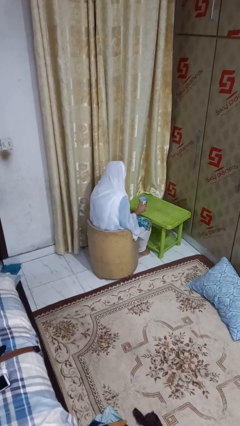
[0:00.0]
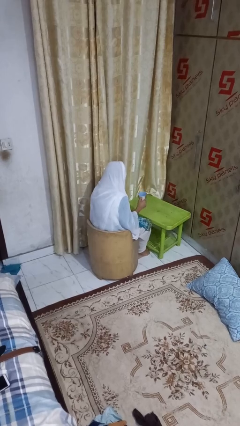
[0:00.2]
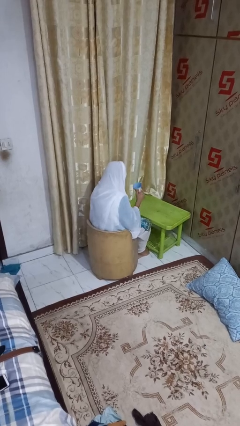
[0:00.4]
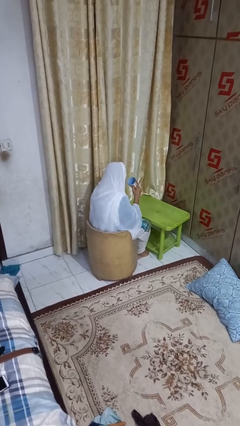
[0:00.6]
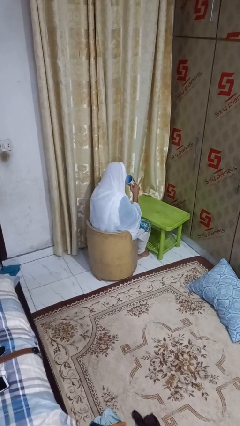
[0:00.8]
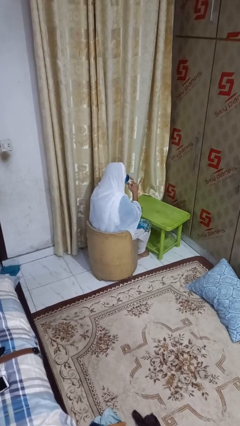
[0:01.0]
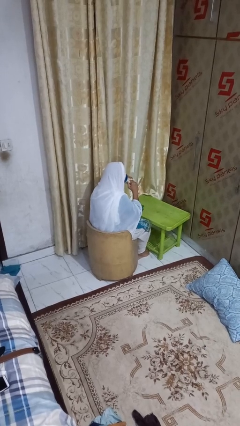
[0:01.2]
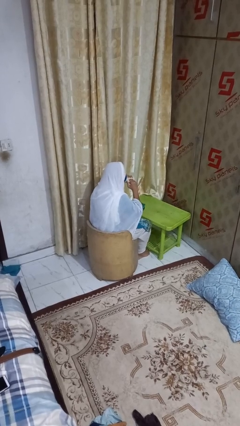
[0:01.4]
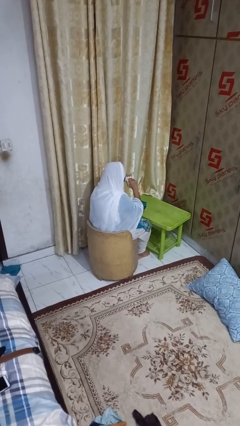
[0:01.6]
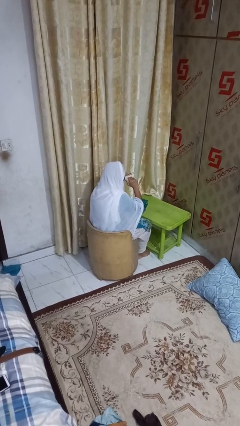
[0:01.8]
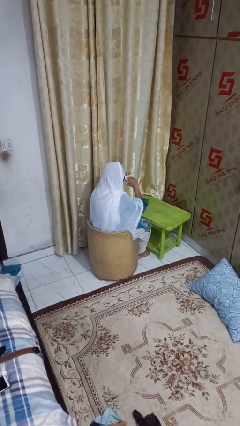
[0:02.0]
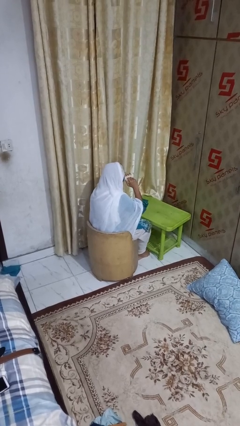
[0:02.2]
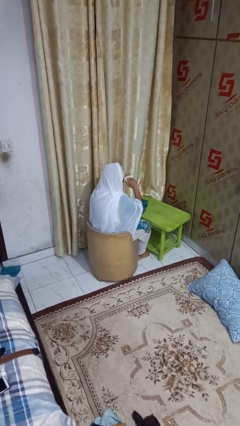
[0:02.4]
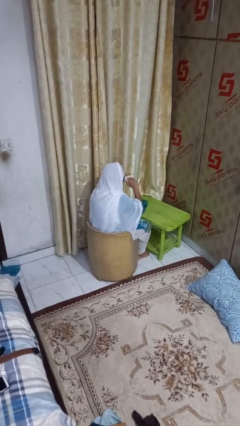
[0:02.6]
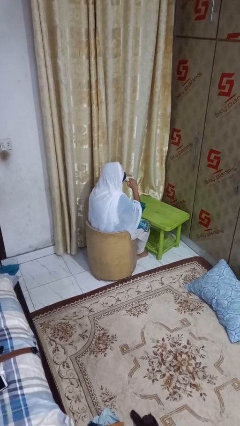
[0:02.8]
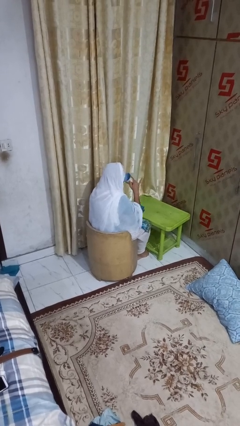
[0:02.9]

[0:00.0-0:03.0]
person drinks from mug

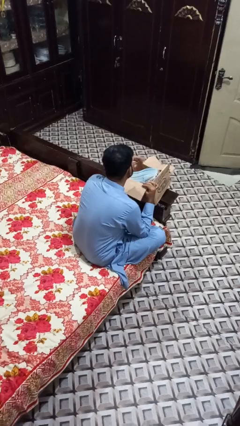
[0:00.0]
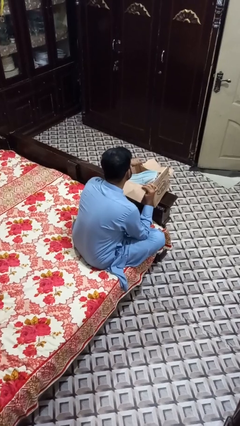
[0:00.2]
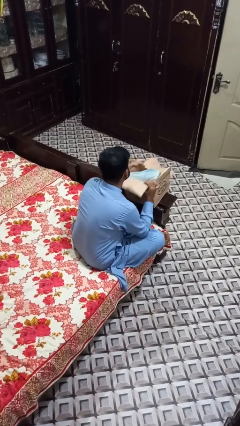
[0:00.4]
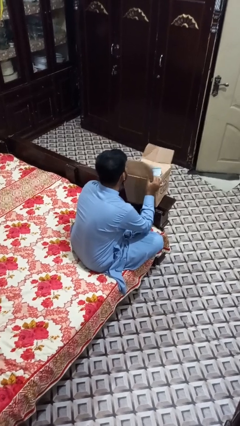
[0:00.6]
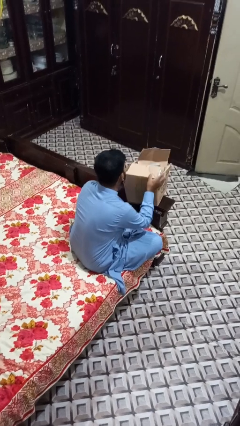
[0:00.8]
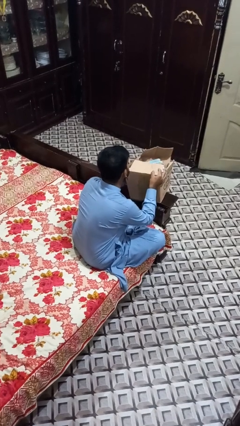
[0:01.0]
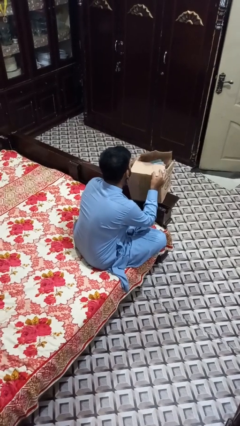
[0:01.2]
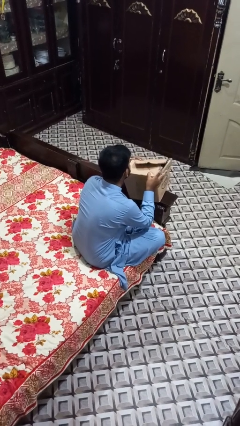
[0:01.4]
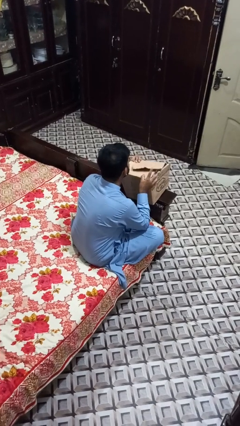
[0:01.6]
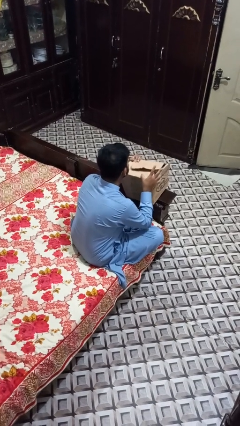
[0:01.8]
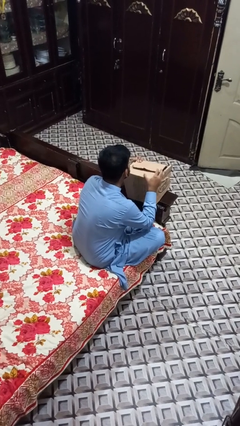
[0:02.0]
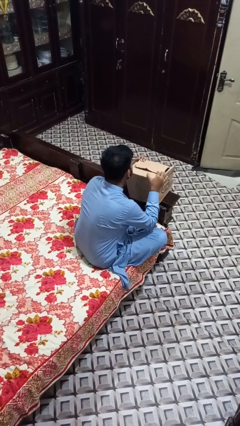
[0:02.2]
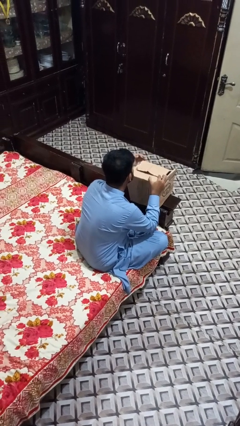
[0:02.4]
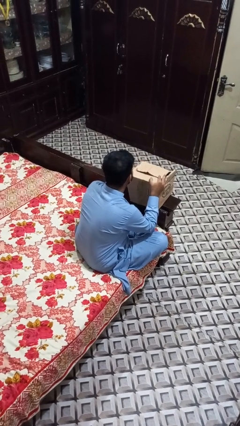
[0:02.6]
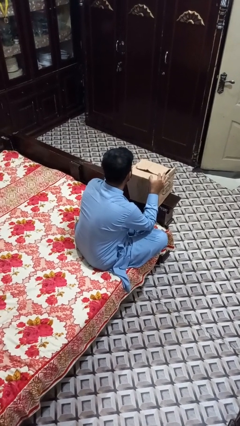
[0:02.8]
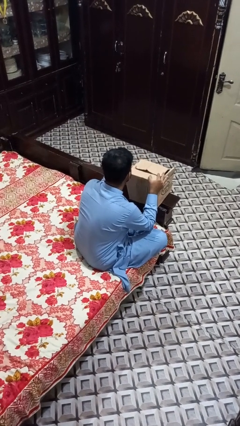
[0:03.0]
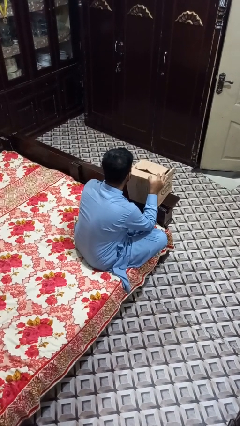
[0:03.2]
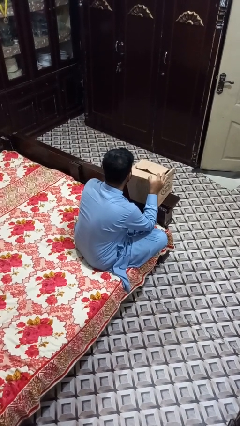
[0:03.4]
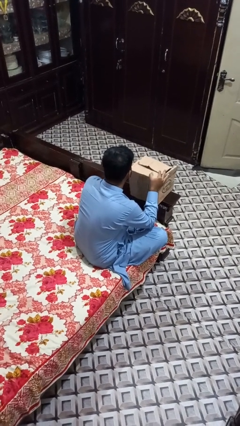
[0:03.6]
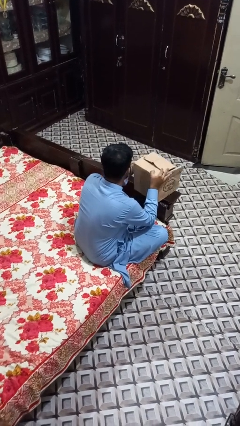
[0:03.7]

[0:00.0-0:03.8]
person closes box

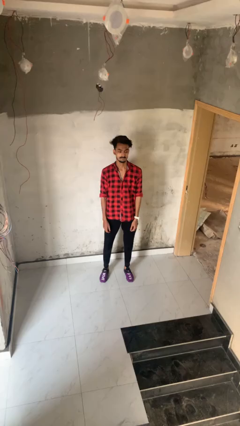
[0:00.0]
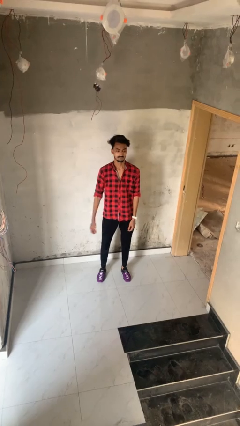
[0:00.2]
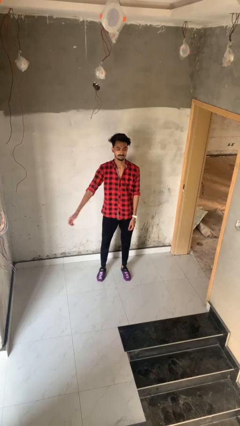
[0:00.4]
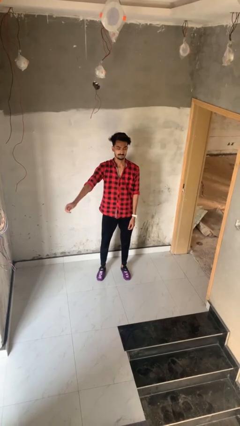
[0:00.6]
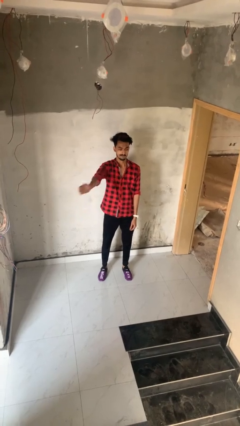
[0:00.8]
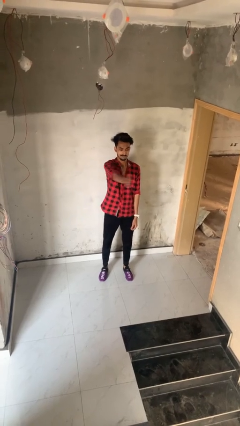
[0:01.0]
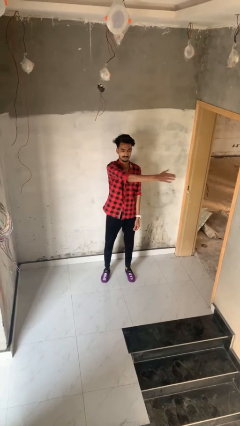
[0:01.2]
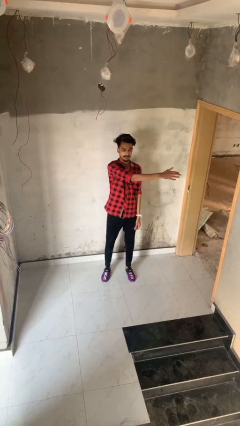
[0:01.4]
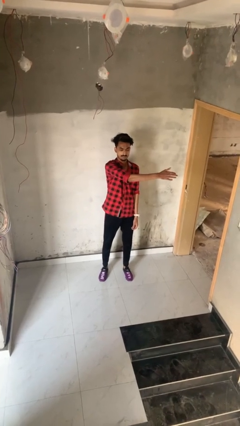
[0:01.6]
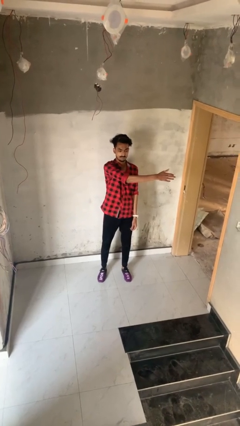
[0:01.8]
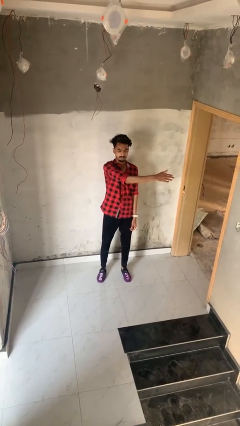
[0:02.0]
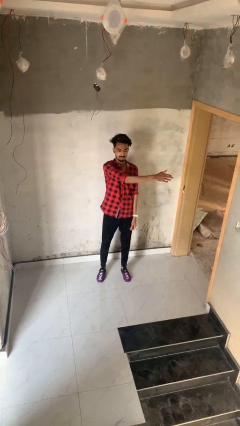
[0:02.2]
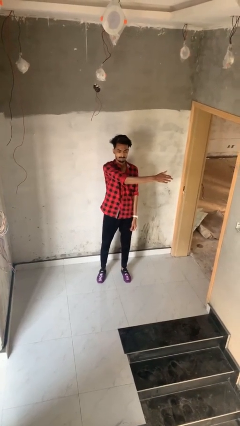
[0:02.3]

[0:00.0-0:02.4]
person gestures swipe left

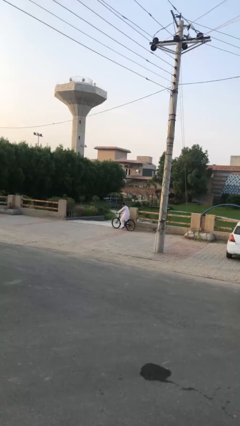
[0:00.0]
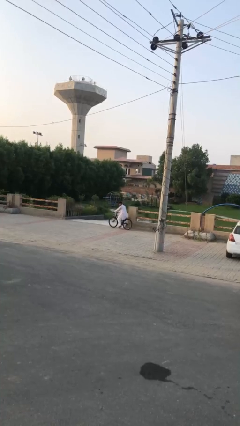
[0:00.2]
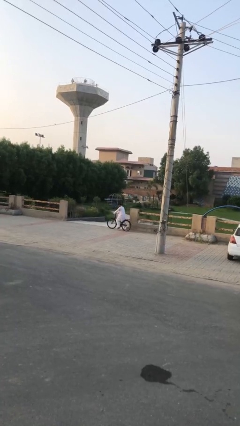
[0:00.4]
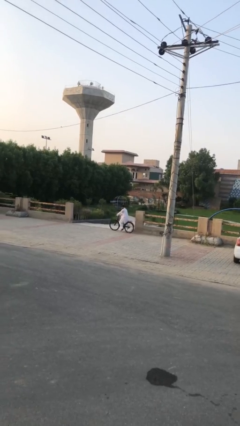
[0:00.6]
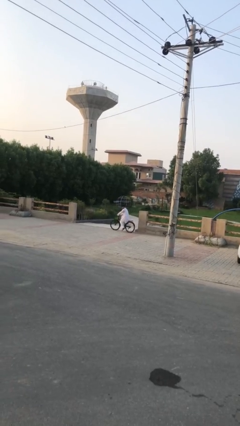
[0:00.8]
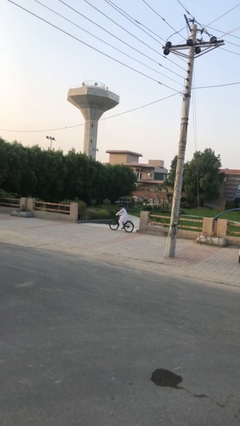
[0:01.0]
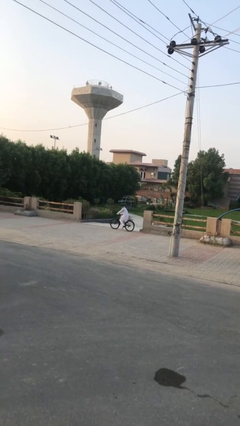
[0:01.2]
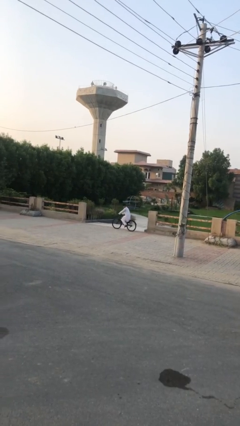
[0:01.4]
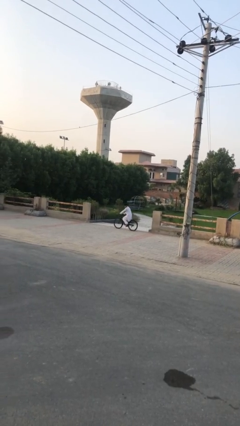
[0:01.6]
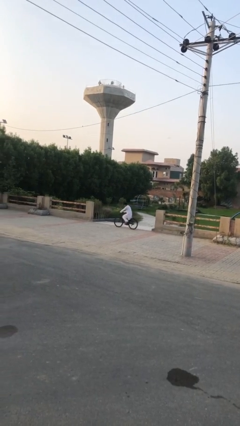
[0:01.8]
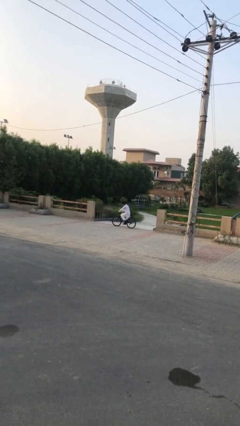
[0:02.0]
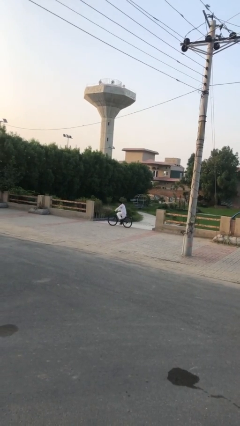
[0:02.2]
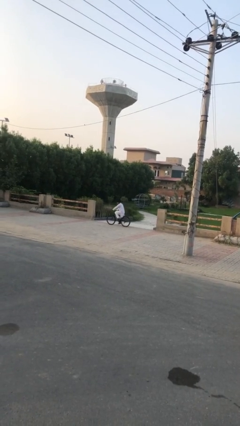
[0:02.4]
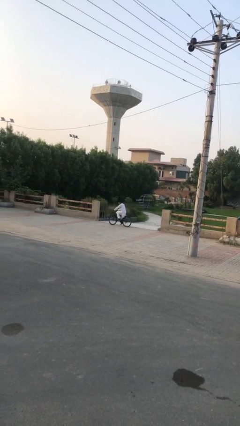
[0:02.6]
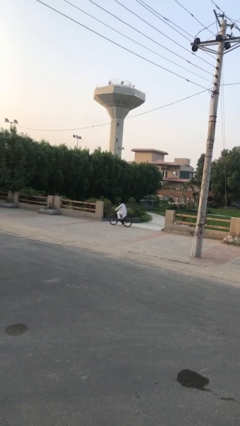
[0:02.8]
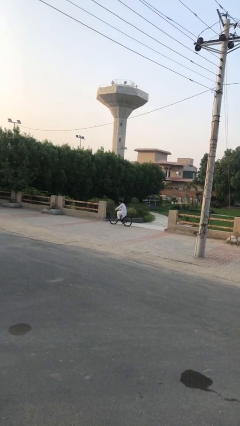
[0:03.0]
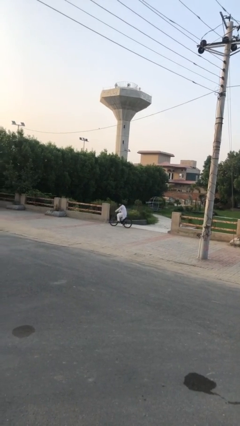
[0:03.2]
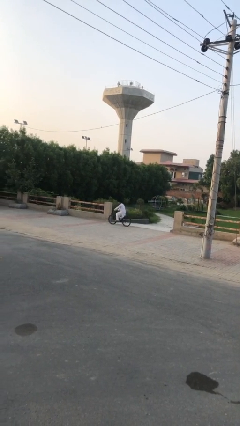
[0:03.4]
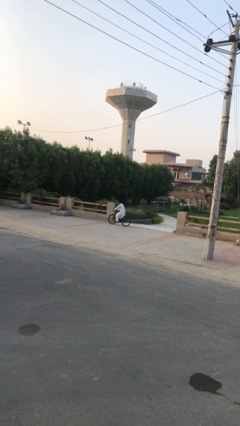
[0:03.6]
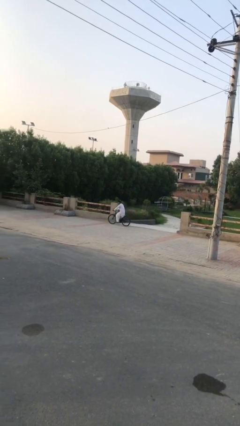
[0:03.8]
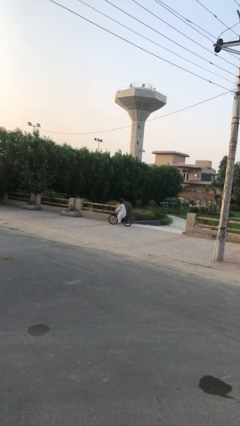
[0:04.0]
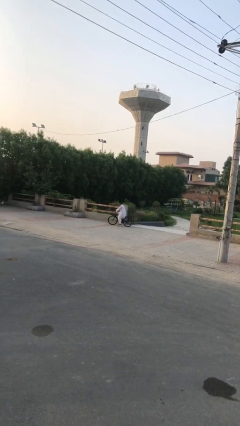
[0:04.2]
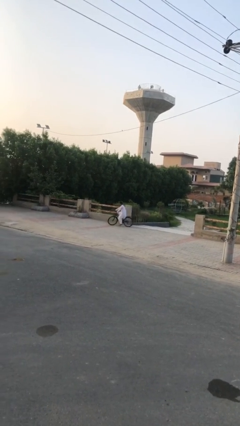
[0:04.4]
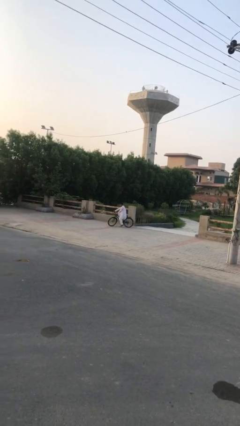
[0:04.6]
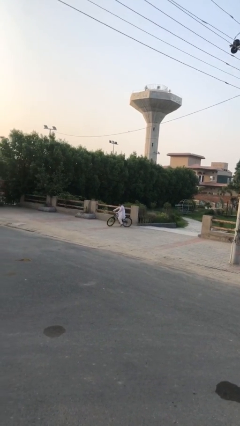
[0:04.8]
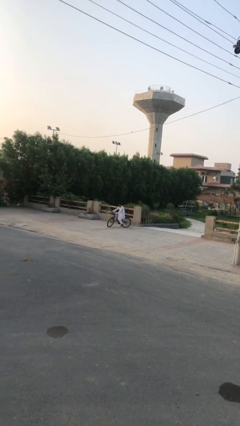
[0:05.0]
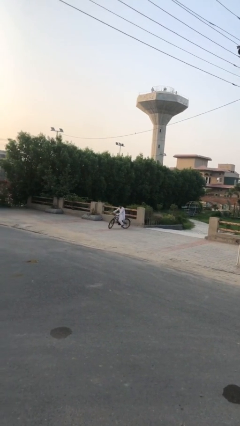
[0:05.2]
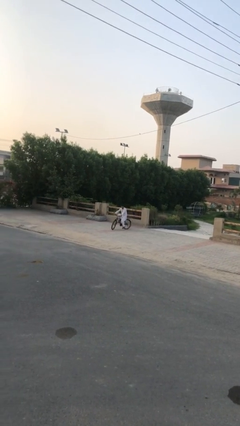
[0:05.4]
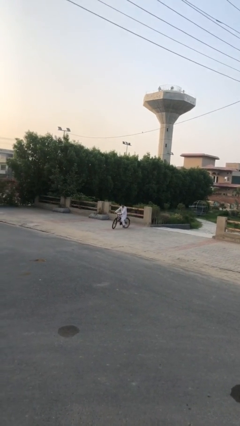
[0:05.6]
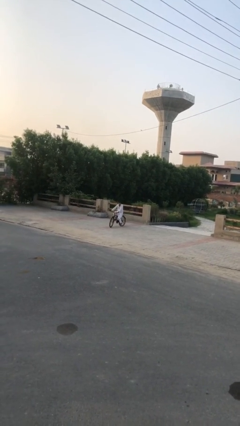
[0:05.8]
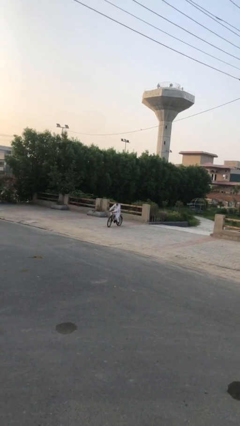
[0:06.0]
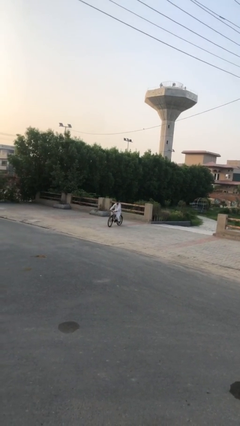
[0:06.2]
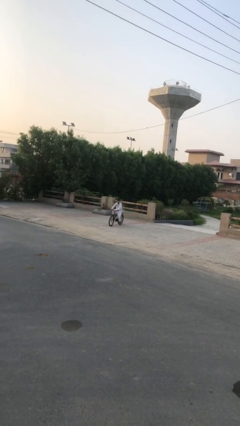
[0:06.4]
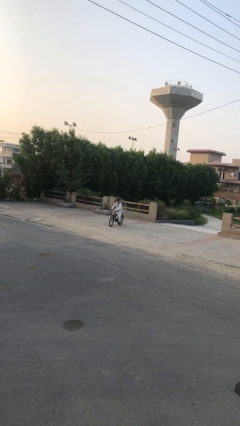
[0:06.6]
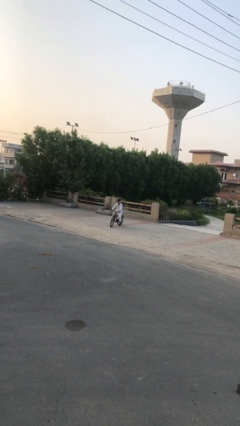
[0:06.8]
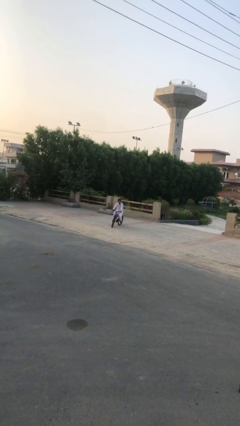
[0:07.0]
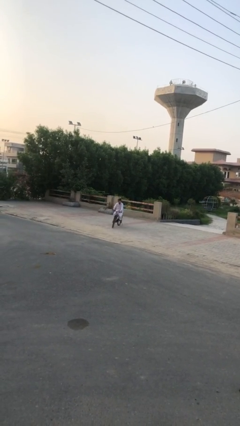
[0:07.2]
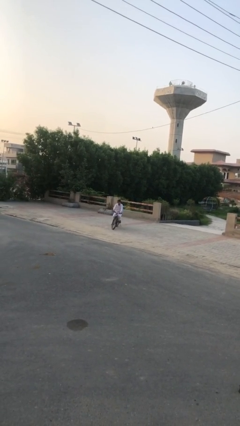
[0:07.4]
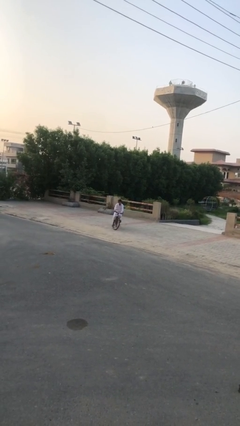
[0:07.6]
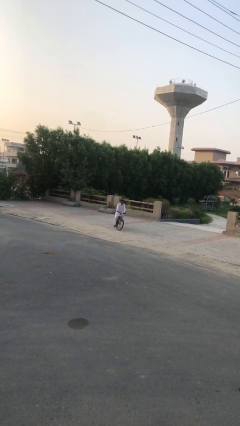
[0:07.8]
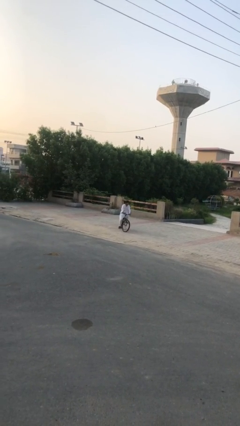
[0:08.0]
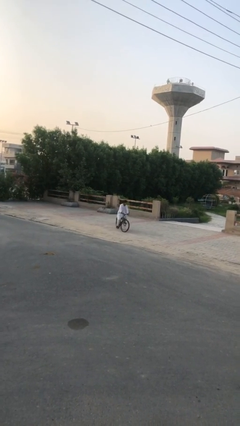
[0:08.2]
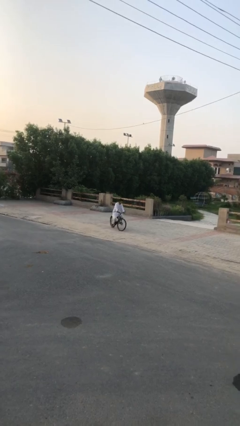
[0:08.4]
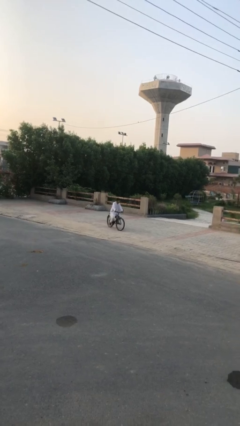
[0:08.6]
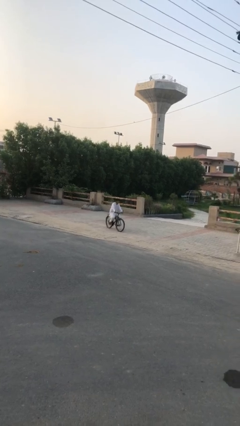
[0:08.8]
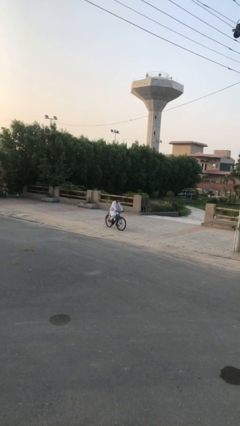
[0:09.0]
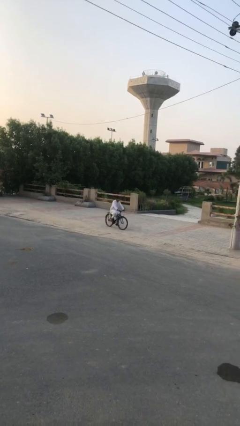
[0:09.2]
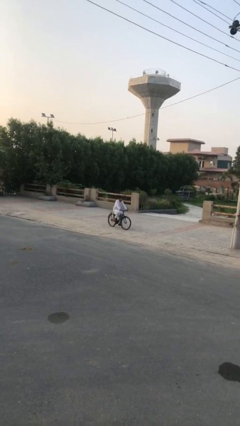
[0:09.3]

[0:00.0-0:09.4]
person rides bicycle
